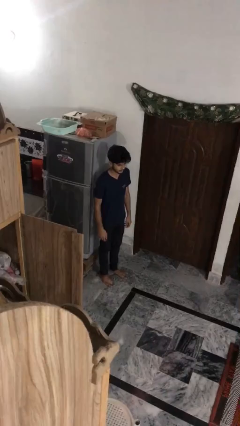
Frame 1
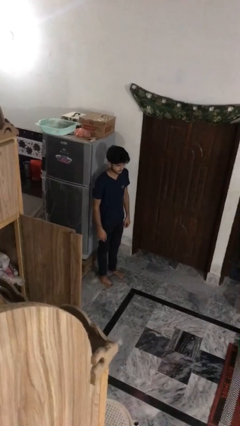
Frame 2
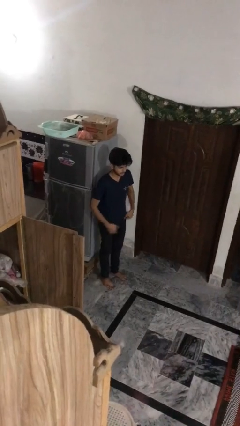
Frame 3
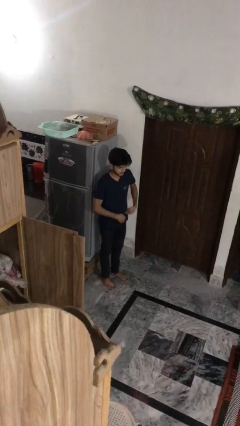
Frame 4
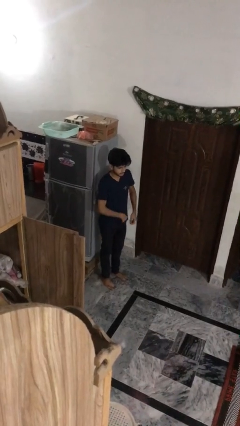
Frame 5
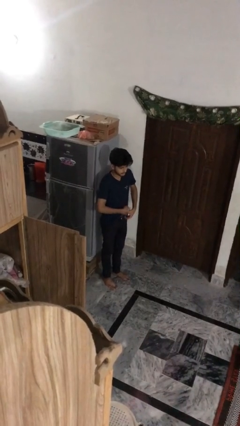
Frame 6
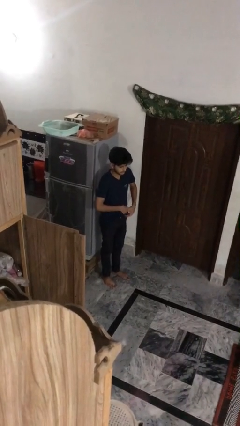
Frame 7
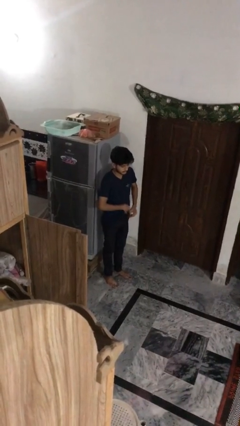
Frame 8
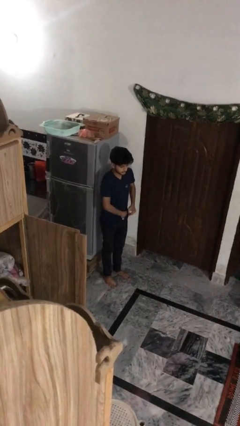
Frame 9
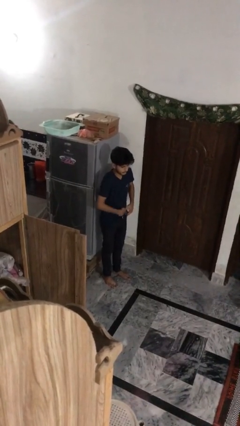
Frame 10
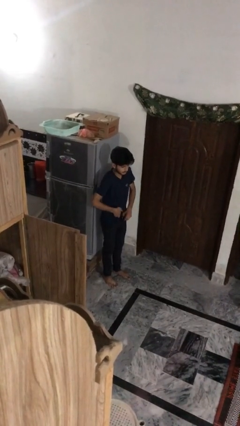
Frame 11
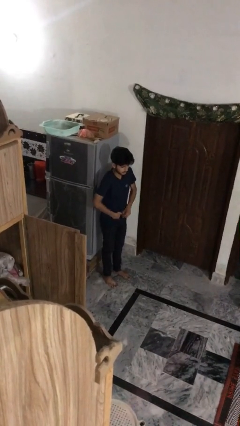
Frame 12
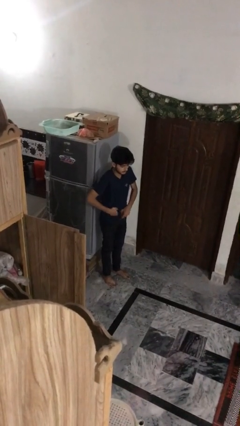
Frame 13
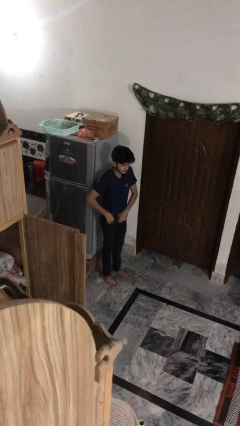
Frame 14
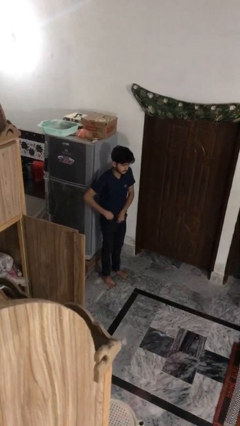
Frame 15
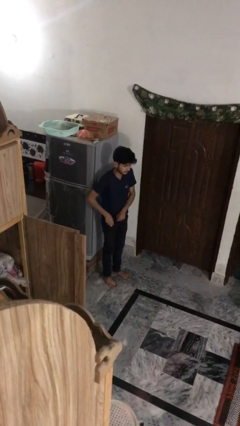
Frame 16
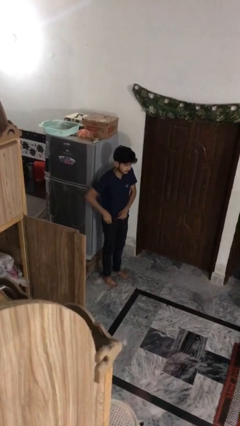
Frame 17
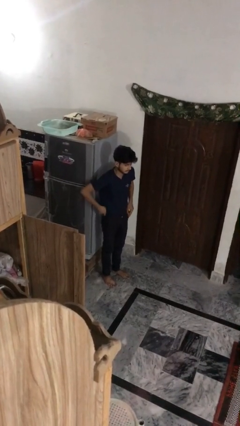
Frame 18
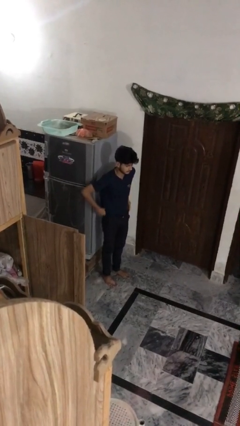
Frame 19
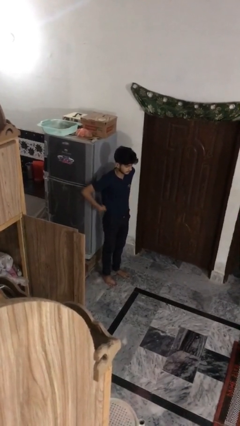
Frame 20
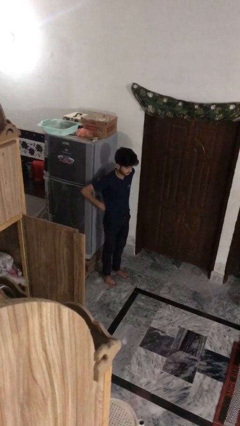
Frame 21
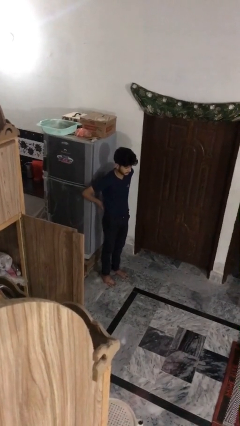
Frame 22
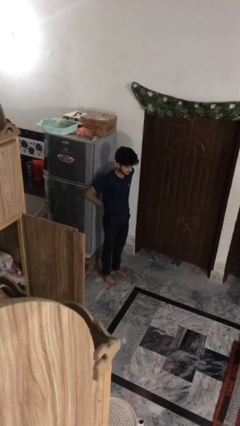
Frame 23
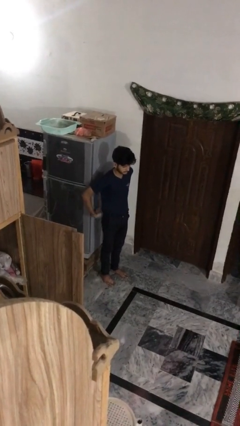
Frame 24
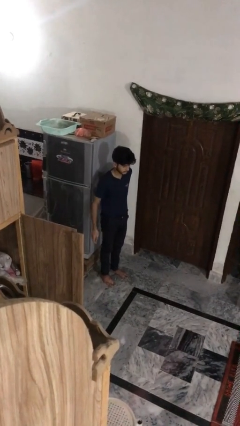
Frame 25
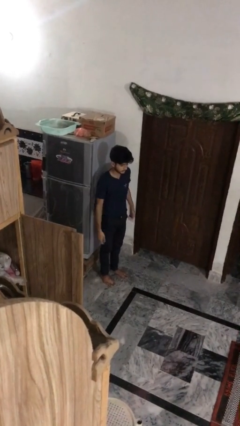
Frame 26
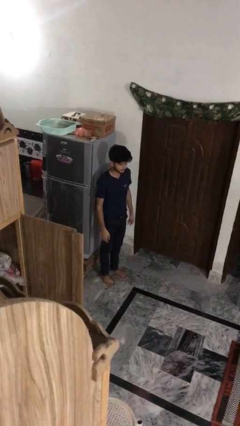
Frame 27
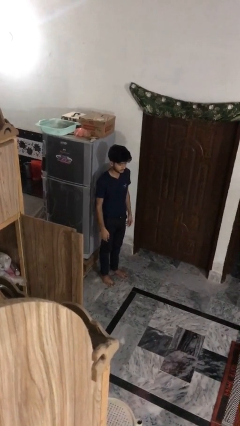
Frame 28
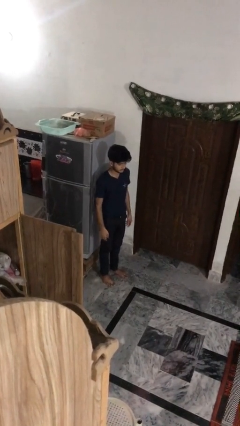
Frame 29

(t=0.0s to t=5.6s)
person tucks in shirt

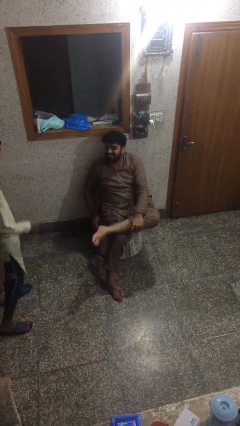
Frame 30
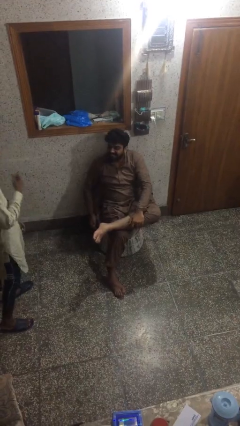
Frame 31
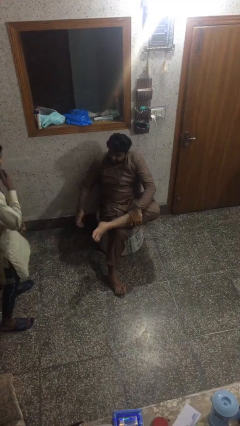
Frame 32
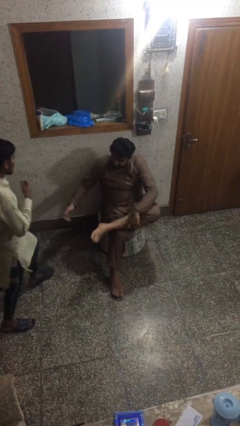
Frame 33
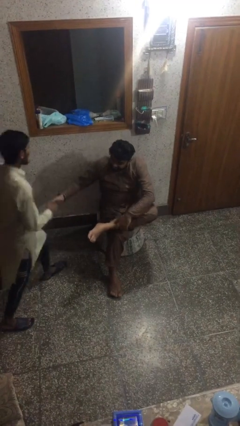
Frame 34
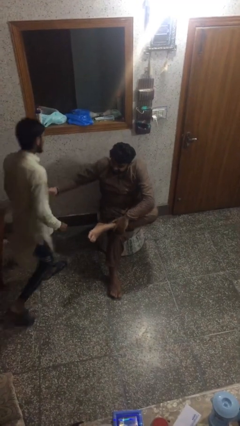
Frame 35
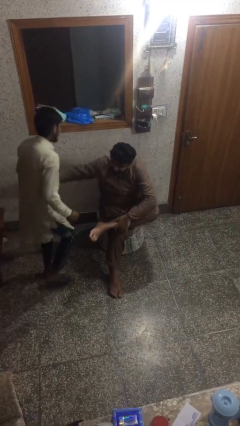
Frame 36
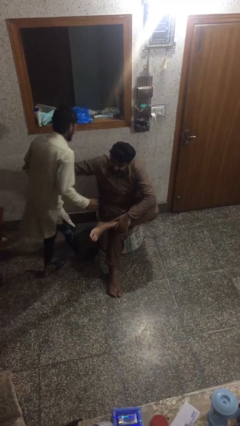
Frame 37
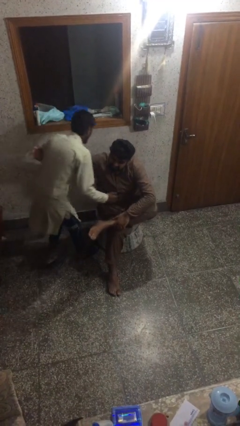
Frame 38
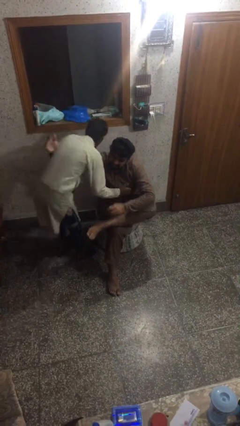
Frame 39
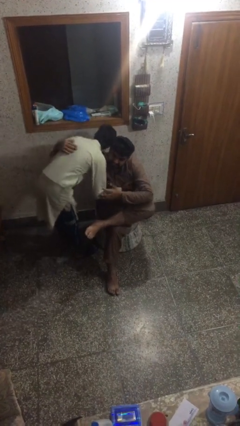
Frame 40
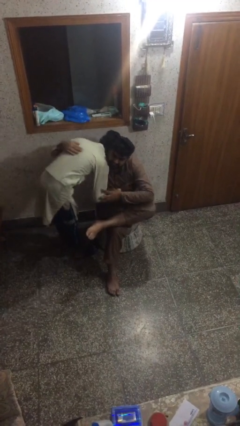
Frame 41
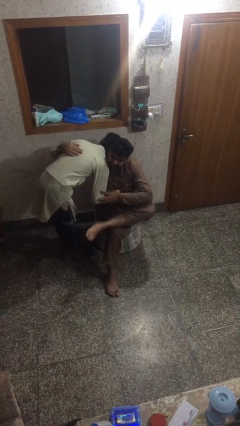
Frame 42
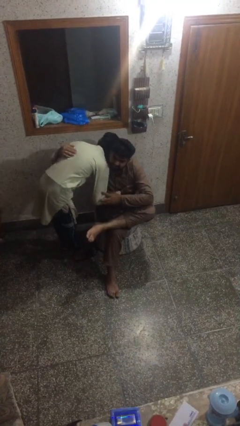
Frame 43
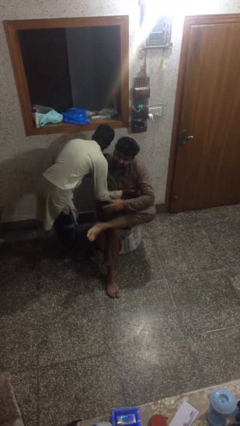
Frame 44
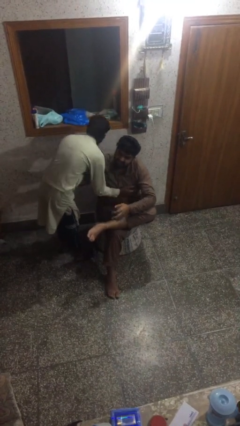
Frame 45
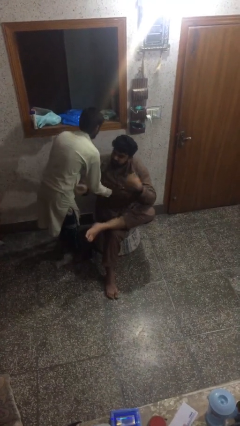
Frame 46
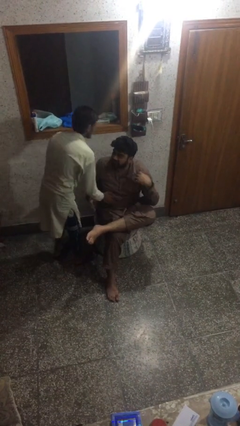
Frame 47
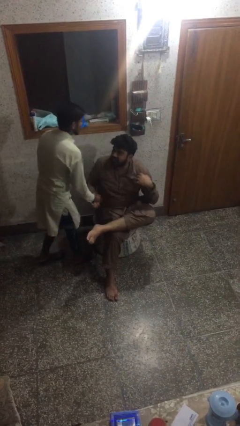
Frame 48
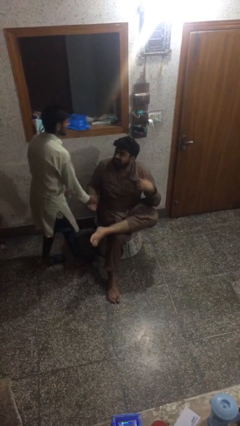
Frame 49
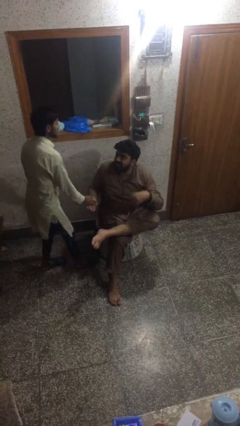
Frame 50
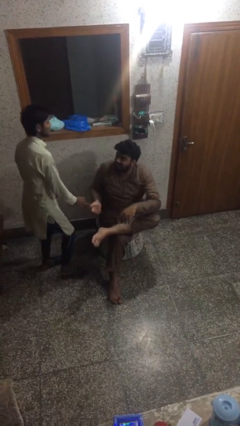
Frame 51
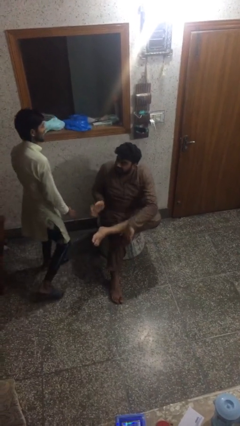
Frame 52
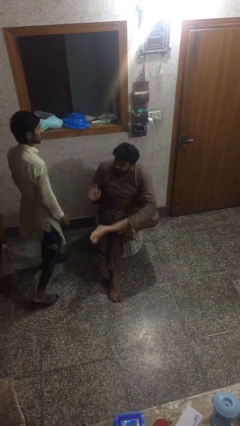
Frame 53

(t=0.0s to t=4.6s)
person embraces person

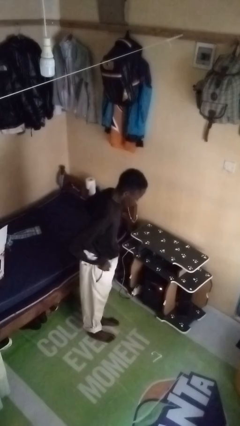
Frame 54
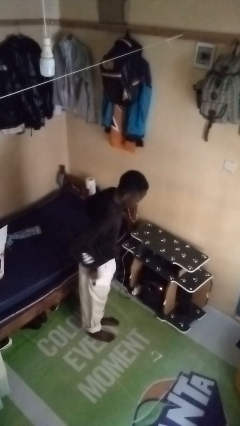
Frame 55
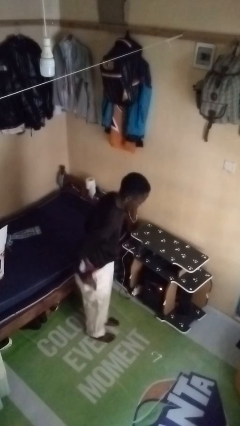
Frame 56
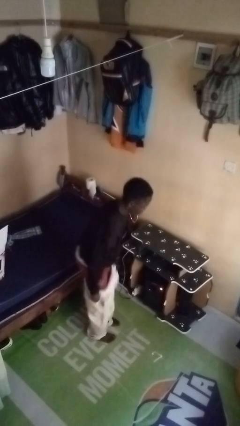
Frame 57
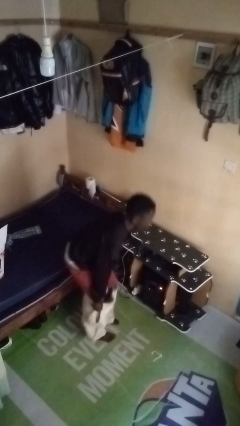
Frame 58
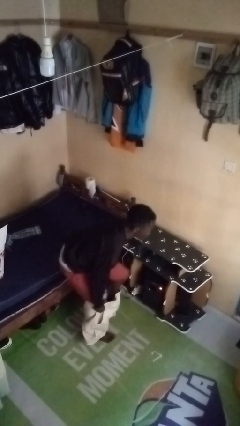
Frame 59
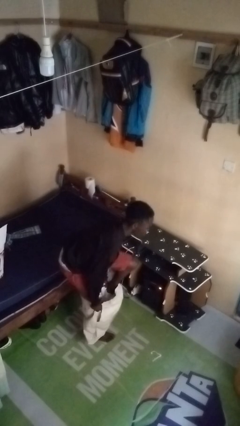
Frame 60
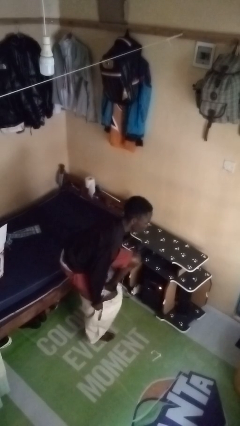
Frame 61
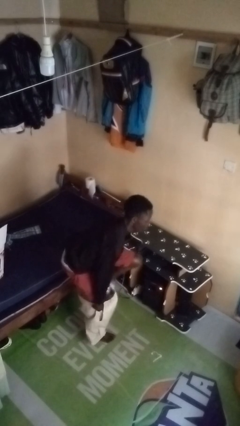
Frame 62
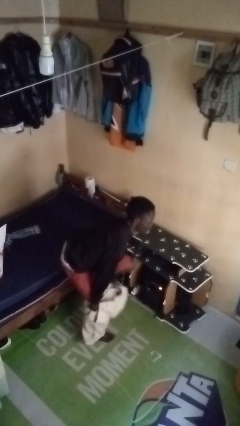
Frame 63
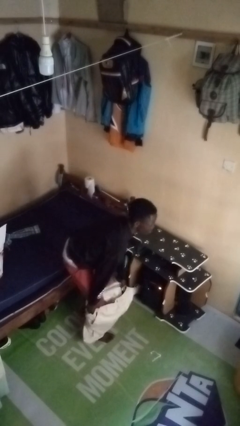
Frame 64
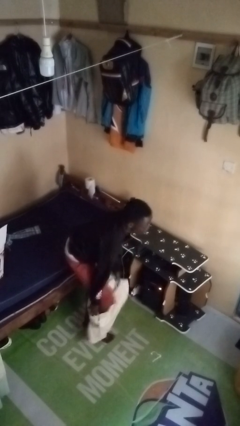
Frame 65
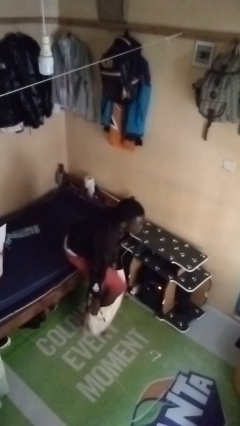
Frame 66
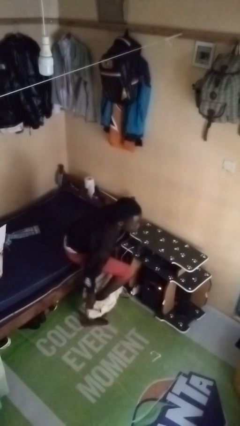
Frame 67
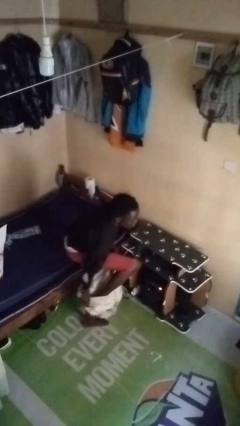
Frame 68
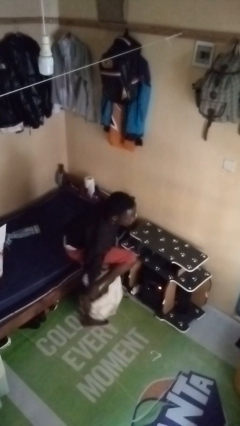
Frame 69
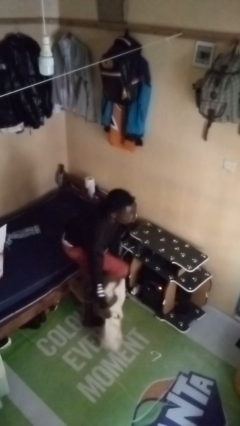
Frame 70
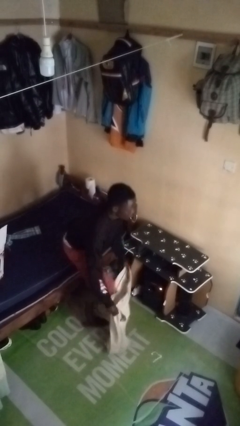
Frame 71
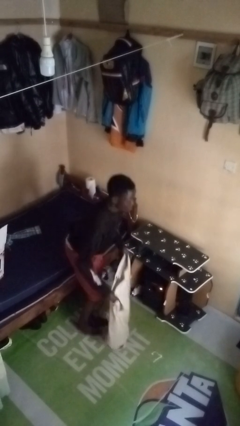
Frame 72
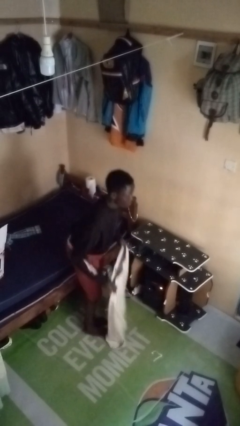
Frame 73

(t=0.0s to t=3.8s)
person takes off pants

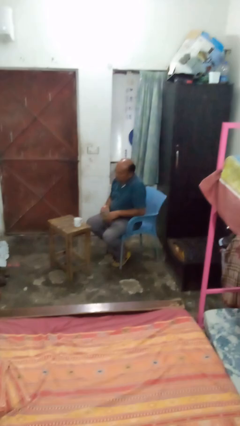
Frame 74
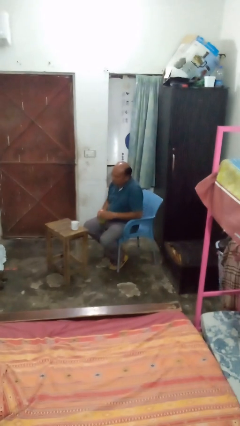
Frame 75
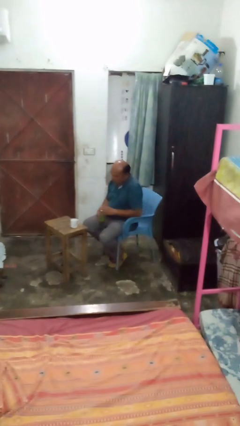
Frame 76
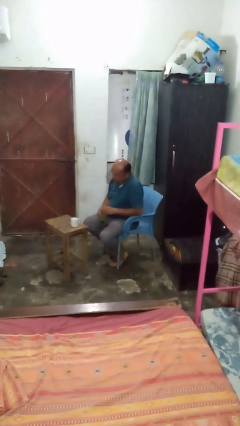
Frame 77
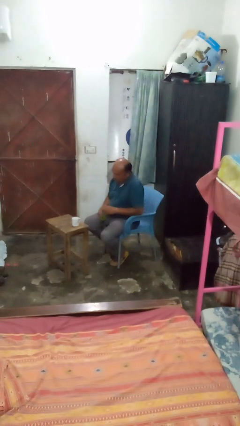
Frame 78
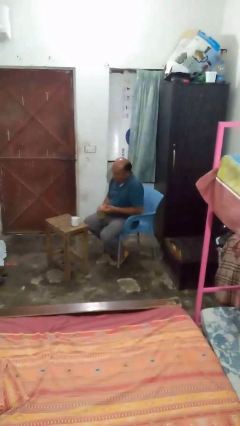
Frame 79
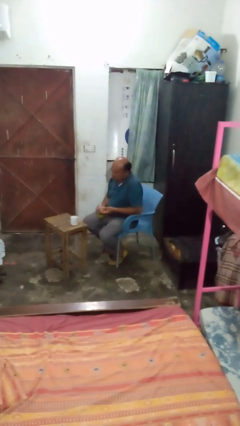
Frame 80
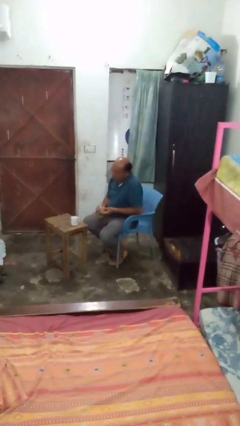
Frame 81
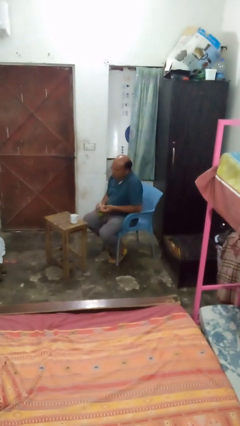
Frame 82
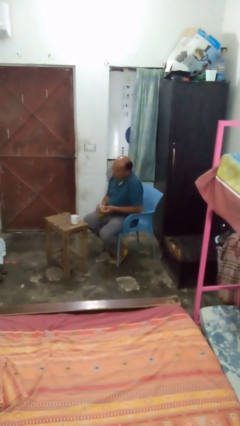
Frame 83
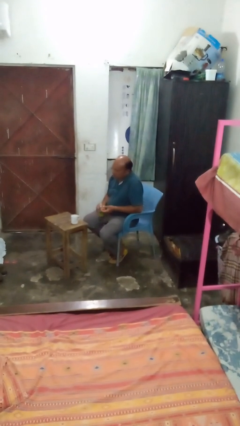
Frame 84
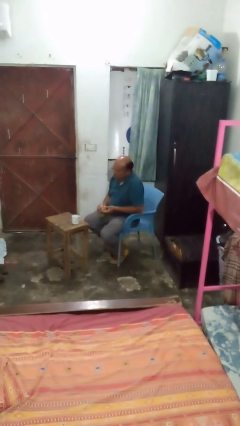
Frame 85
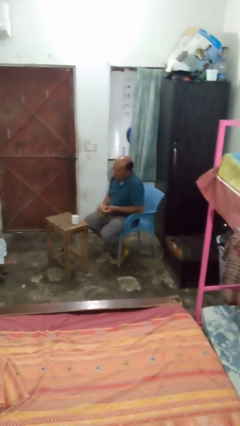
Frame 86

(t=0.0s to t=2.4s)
person unscrews lid from bottle

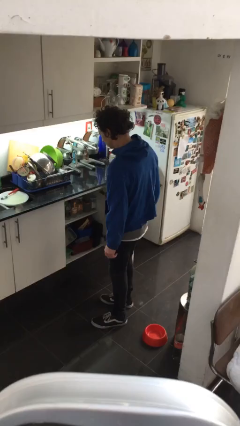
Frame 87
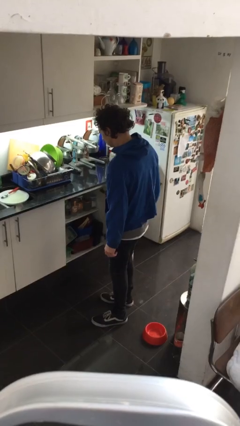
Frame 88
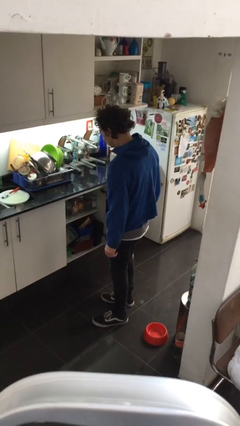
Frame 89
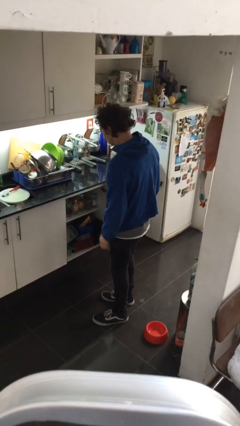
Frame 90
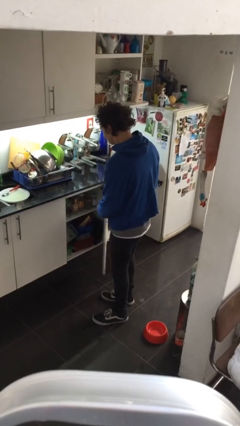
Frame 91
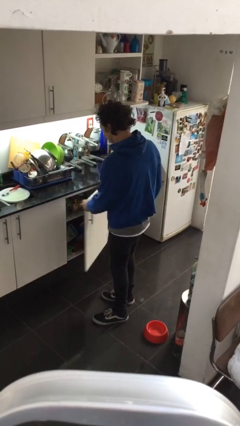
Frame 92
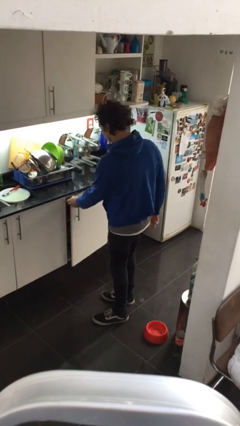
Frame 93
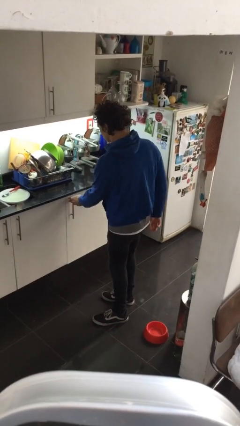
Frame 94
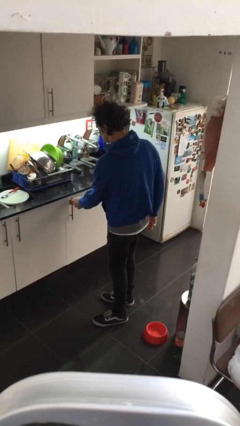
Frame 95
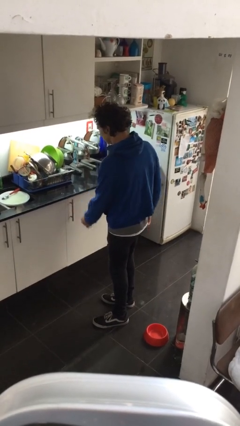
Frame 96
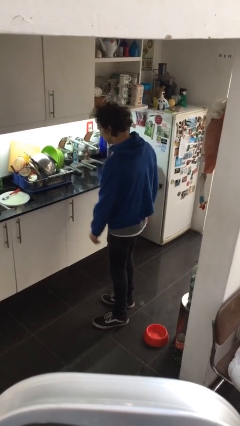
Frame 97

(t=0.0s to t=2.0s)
person closes cabinet
